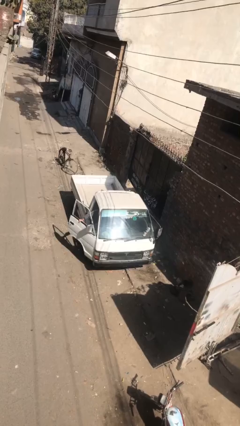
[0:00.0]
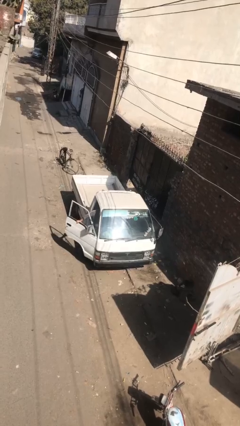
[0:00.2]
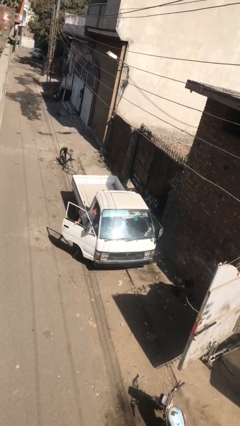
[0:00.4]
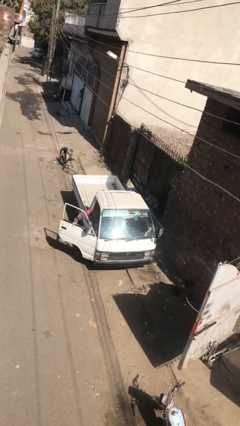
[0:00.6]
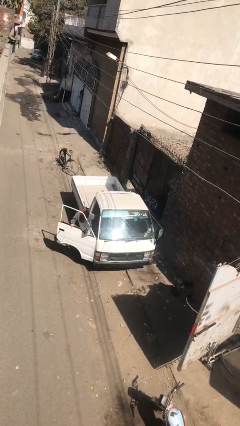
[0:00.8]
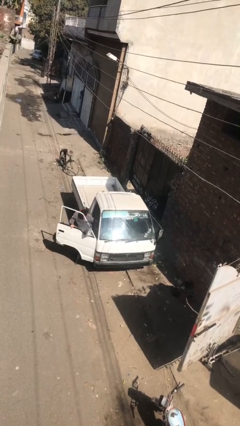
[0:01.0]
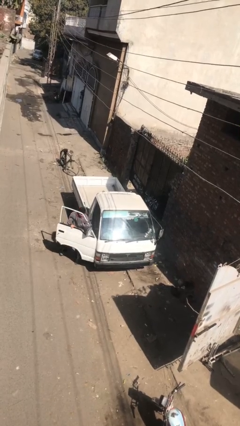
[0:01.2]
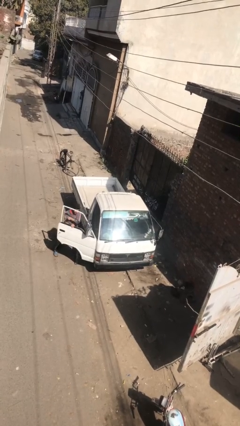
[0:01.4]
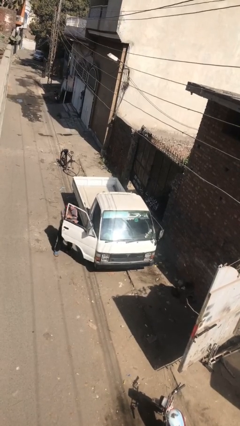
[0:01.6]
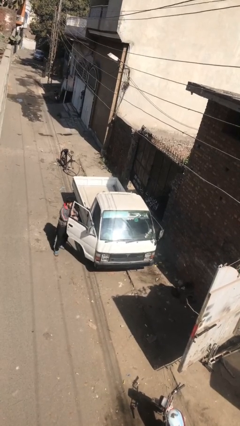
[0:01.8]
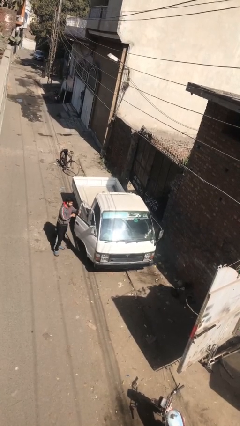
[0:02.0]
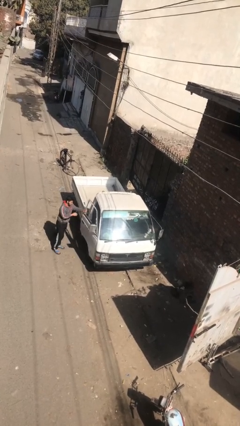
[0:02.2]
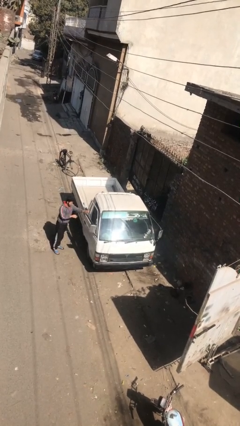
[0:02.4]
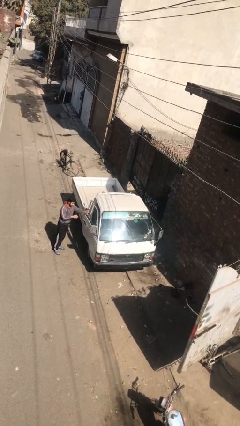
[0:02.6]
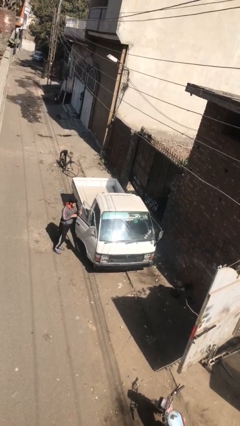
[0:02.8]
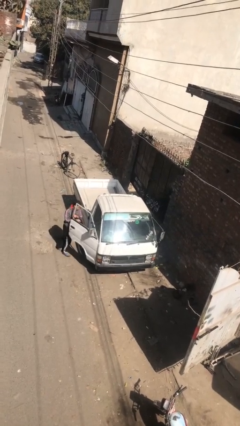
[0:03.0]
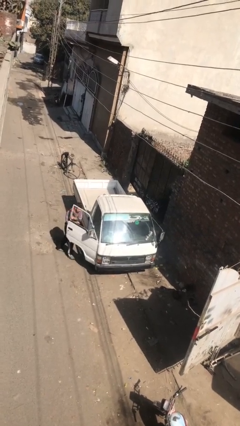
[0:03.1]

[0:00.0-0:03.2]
car drops off person

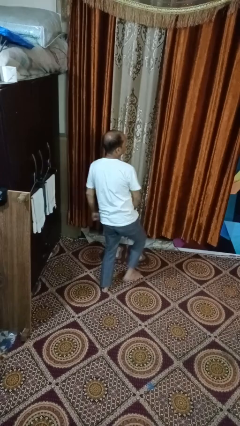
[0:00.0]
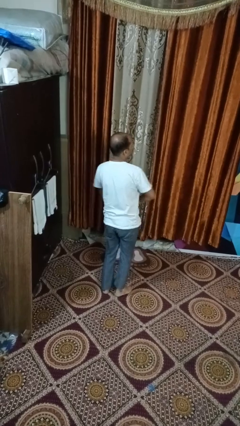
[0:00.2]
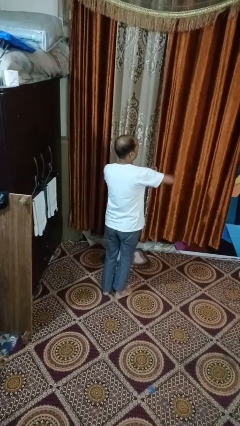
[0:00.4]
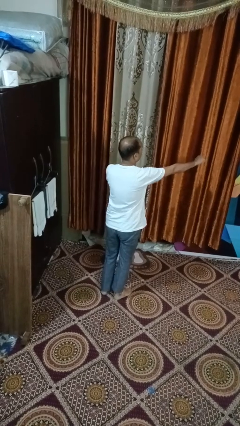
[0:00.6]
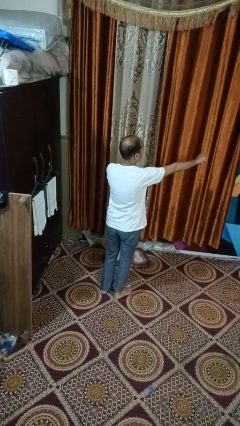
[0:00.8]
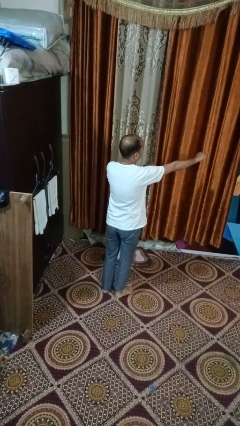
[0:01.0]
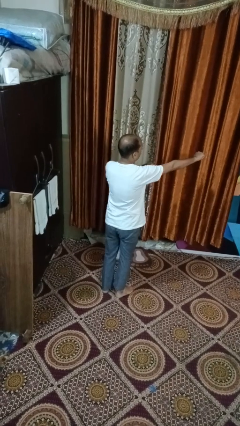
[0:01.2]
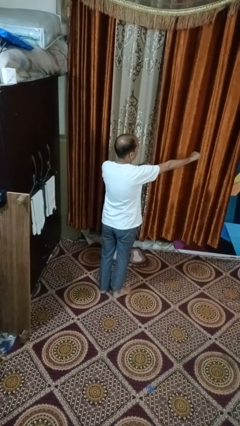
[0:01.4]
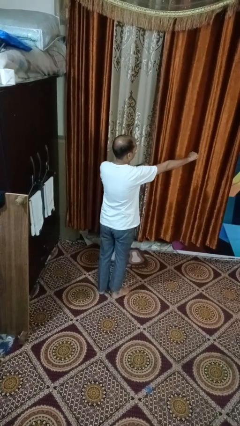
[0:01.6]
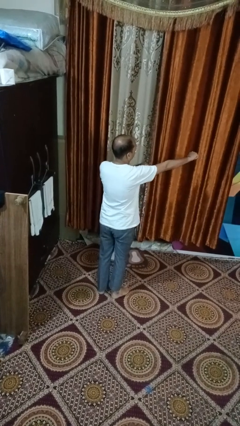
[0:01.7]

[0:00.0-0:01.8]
person karate chop

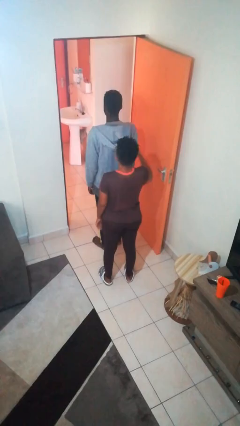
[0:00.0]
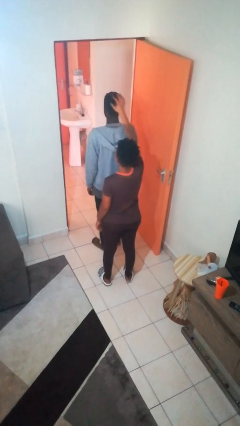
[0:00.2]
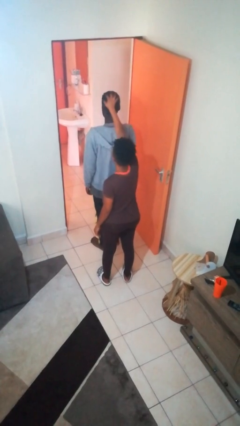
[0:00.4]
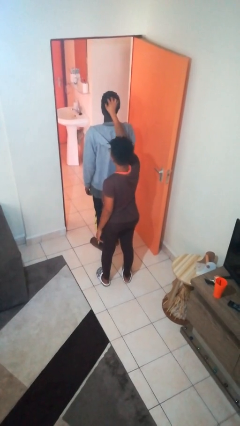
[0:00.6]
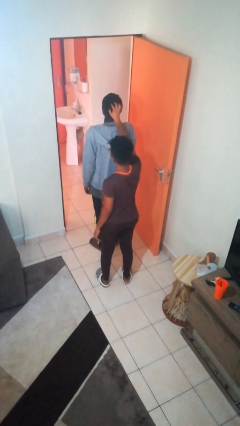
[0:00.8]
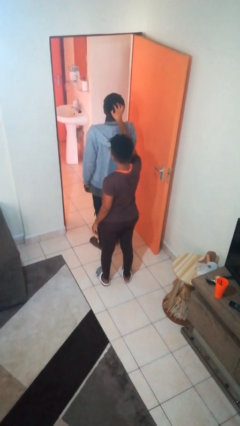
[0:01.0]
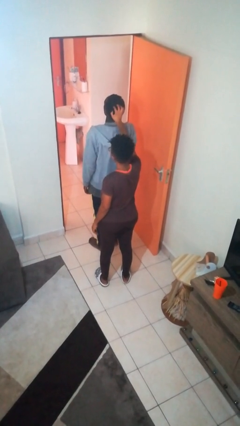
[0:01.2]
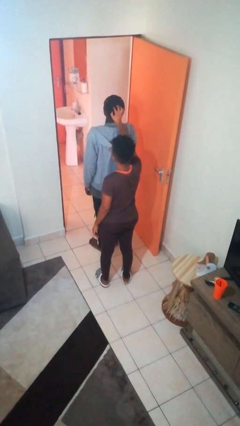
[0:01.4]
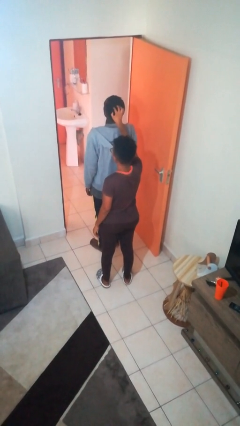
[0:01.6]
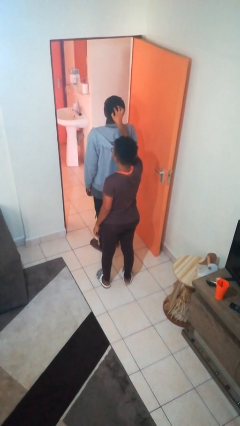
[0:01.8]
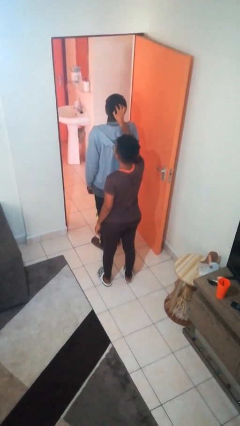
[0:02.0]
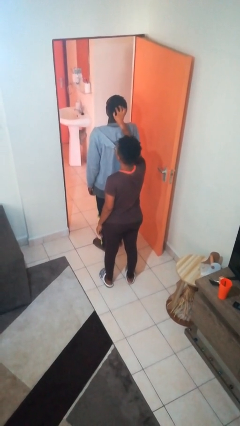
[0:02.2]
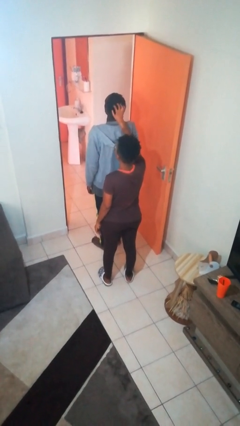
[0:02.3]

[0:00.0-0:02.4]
person grabs person by hair

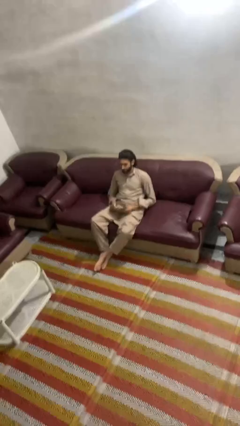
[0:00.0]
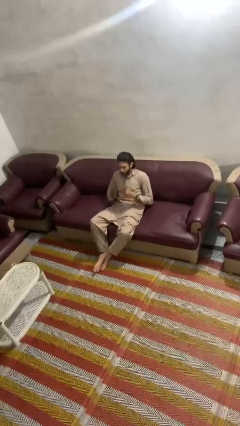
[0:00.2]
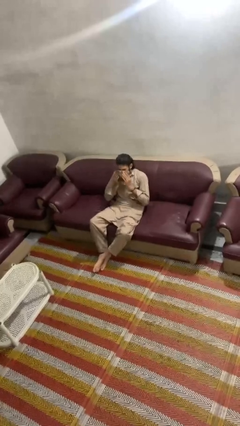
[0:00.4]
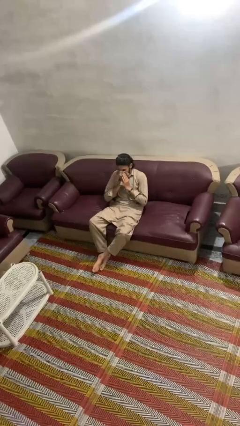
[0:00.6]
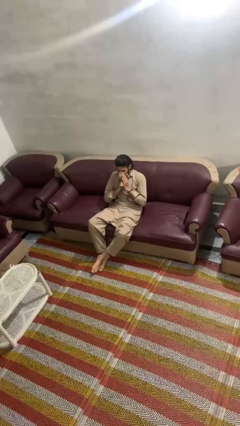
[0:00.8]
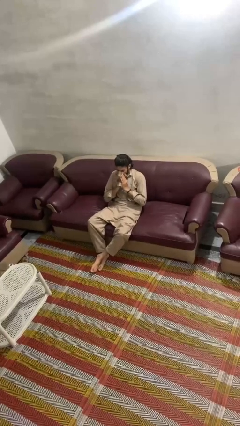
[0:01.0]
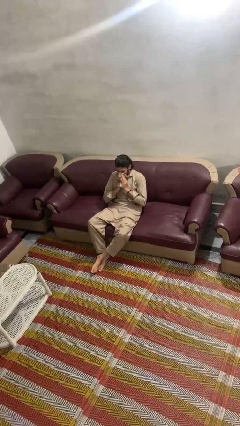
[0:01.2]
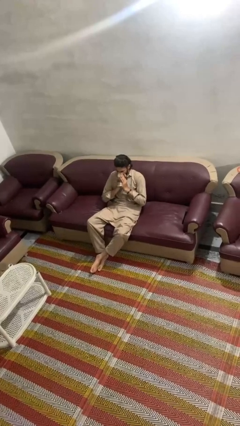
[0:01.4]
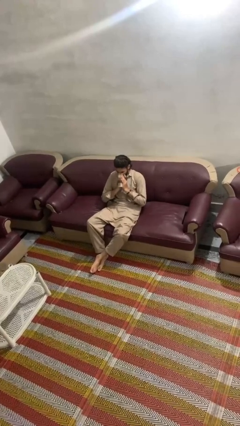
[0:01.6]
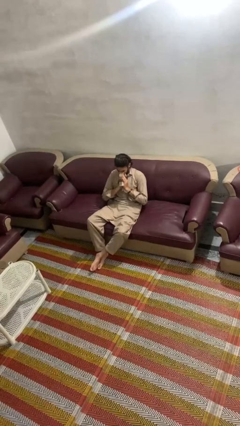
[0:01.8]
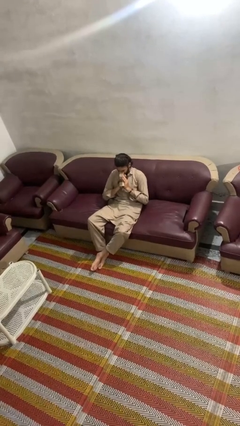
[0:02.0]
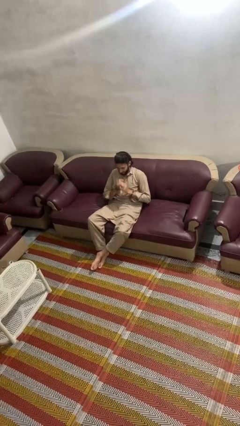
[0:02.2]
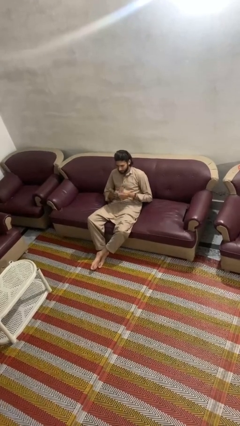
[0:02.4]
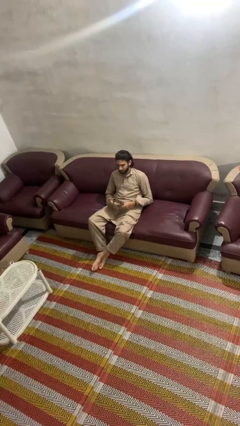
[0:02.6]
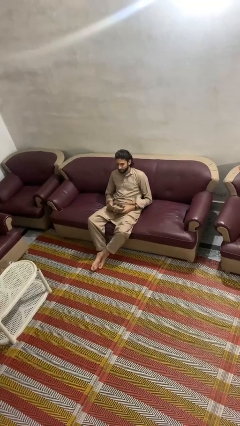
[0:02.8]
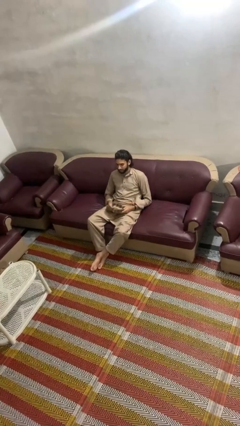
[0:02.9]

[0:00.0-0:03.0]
person blows nose

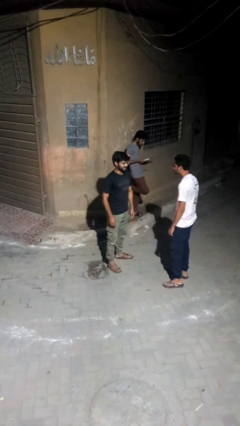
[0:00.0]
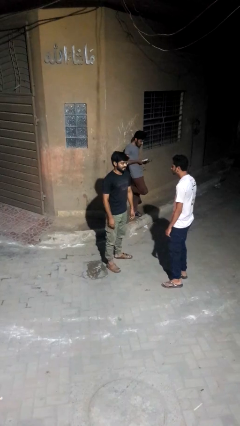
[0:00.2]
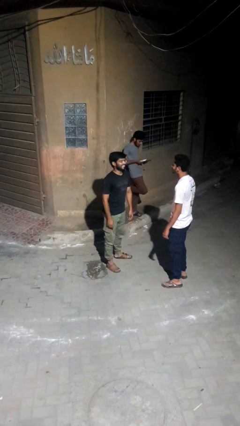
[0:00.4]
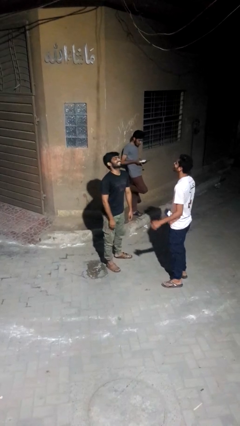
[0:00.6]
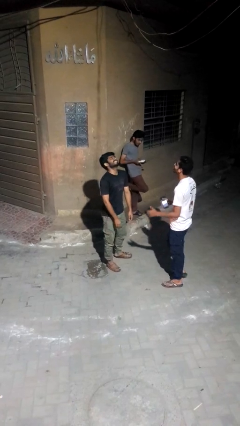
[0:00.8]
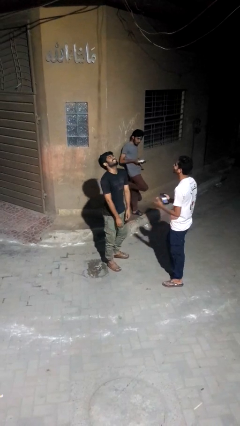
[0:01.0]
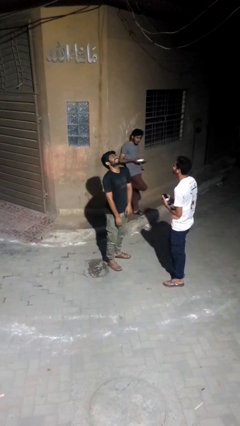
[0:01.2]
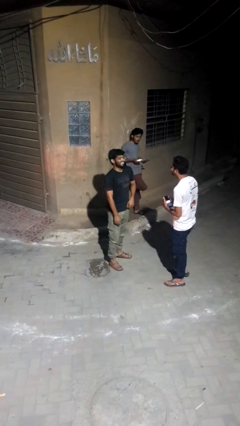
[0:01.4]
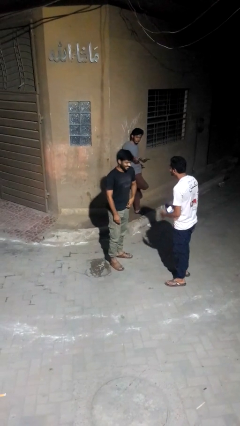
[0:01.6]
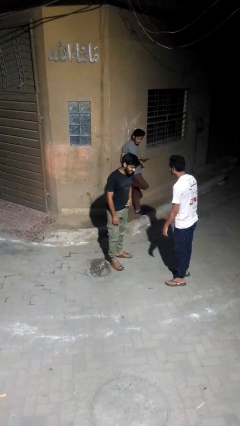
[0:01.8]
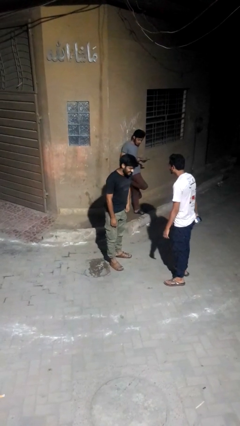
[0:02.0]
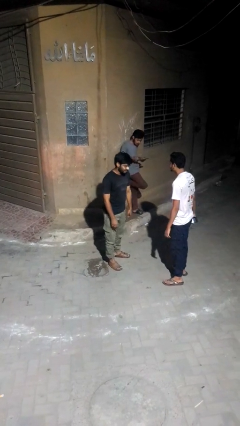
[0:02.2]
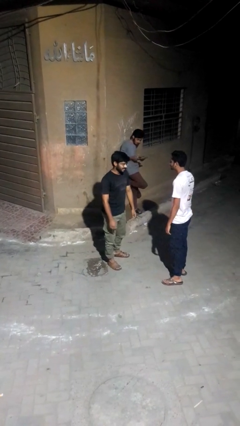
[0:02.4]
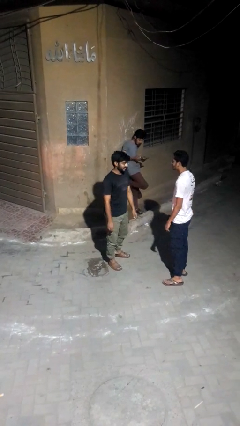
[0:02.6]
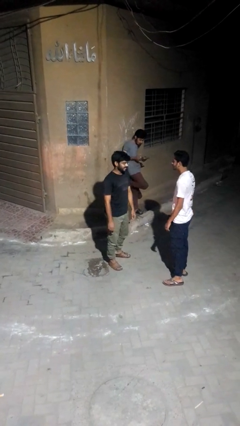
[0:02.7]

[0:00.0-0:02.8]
person laughs with person

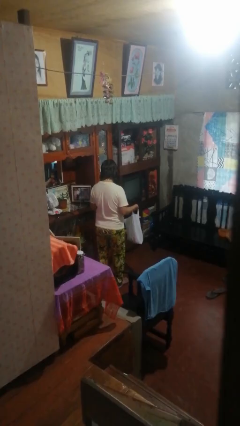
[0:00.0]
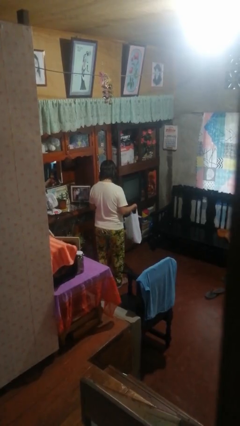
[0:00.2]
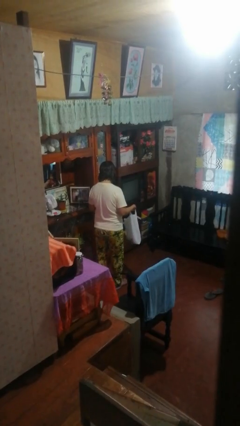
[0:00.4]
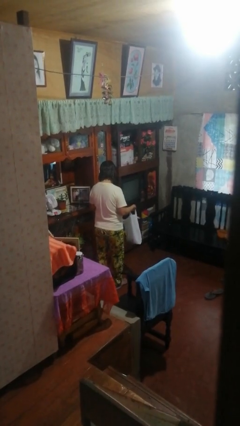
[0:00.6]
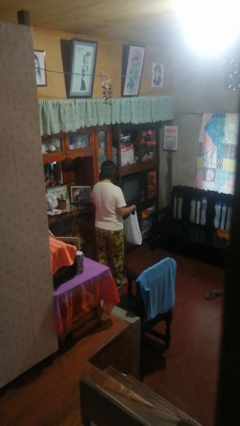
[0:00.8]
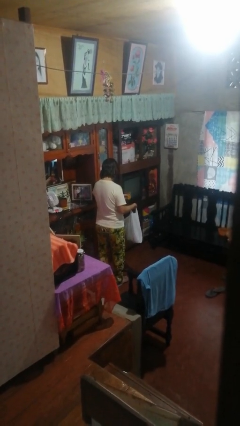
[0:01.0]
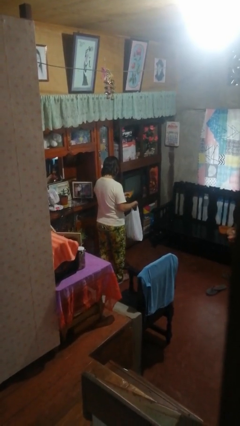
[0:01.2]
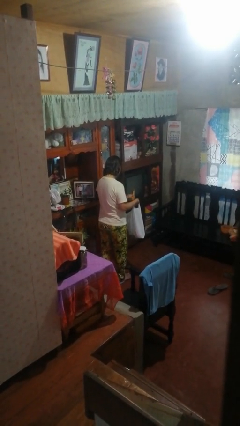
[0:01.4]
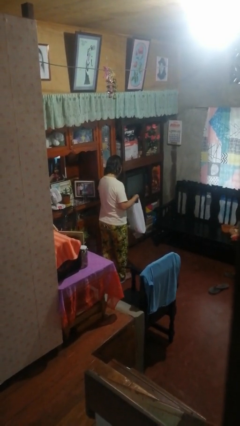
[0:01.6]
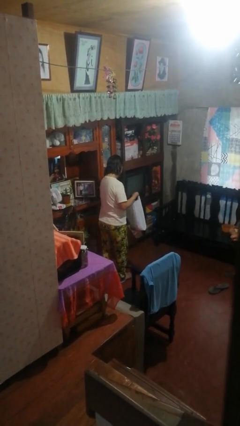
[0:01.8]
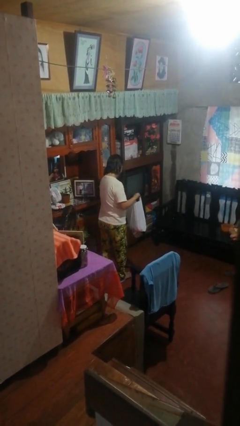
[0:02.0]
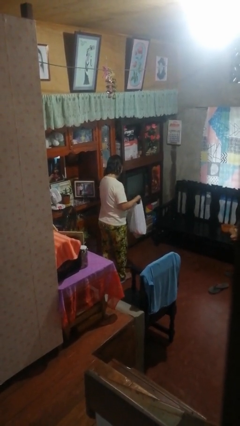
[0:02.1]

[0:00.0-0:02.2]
person puts object into bag

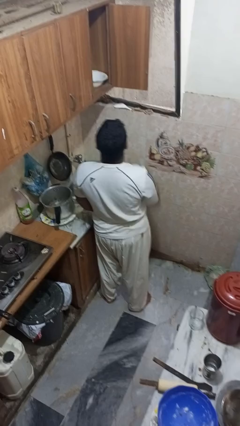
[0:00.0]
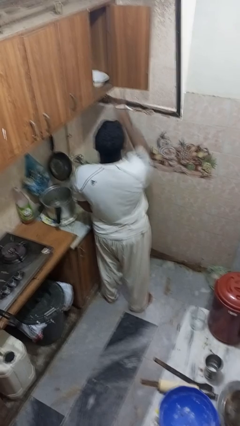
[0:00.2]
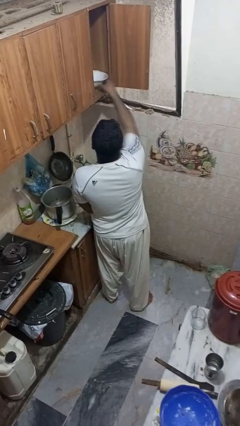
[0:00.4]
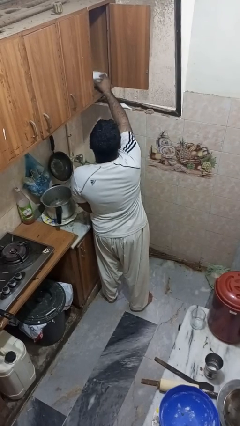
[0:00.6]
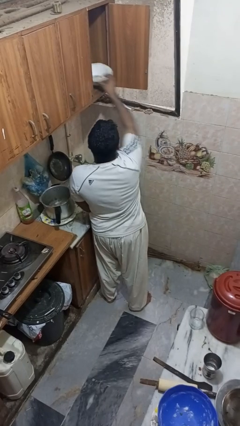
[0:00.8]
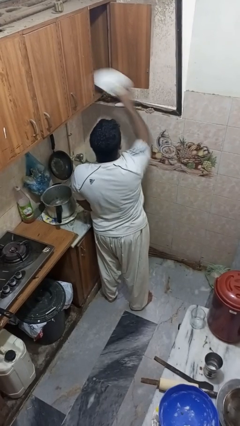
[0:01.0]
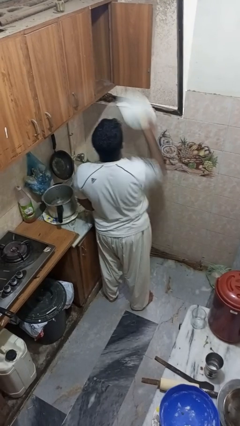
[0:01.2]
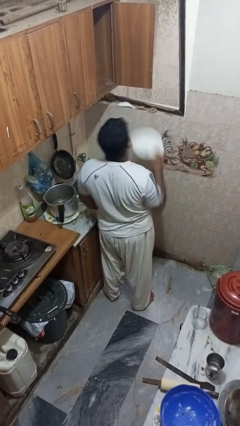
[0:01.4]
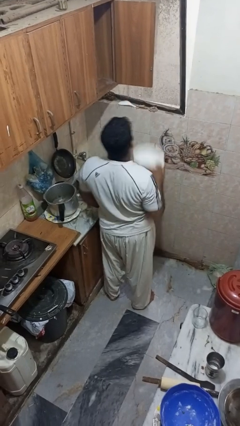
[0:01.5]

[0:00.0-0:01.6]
person takes object from cabinet
